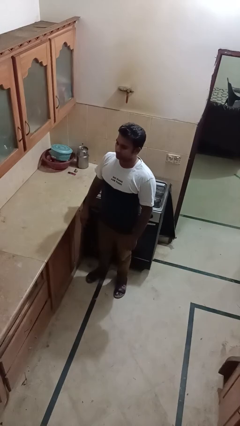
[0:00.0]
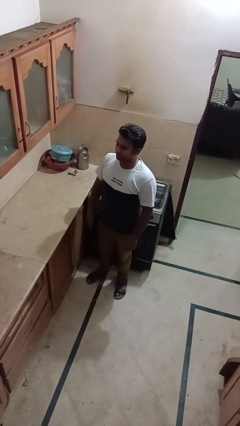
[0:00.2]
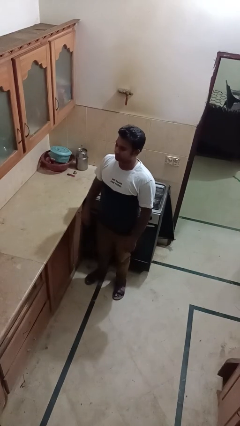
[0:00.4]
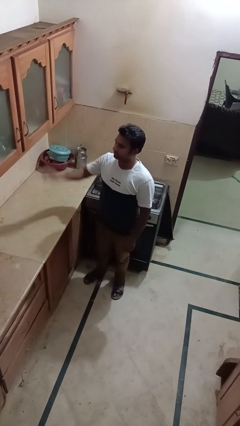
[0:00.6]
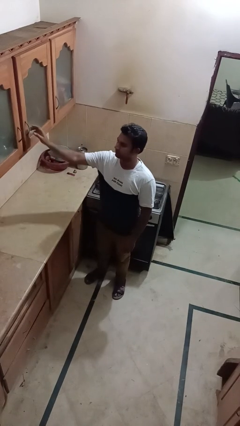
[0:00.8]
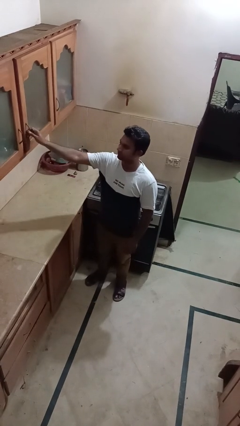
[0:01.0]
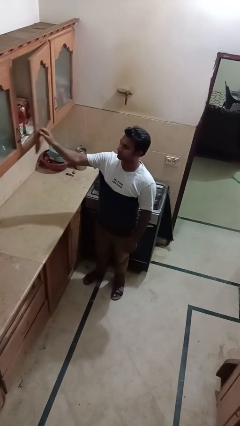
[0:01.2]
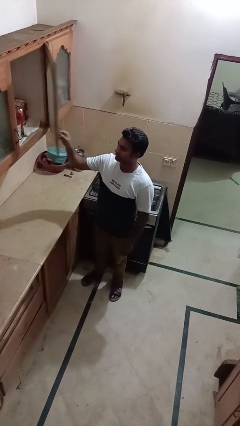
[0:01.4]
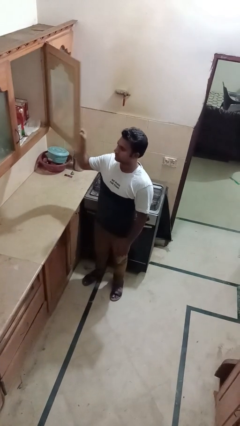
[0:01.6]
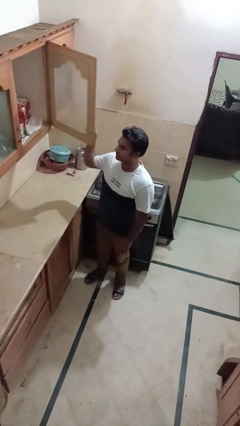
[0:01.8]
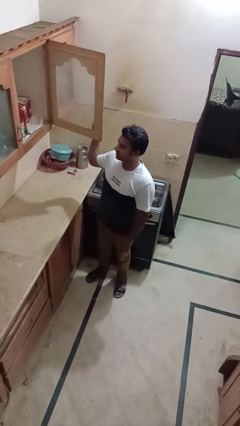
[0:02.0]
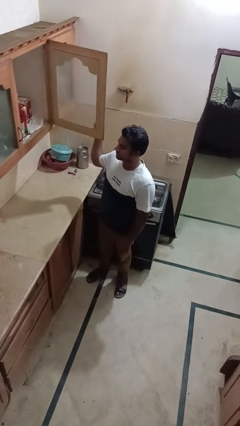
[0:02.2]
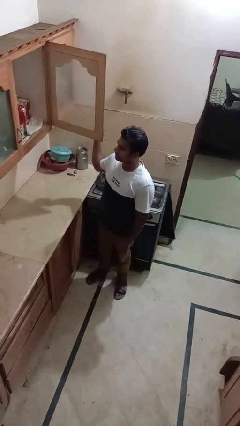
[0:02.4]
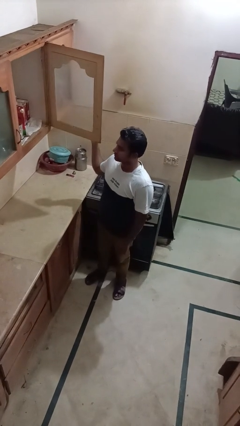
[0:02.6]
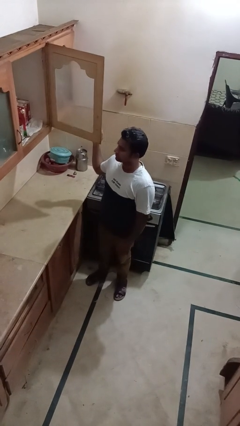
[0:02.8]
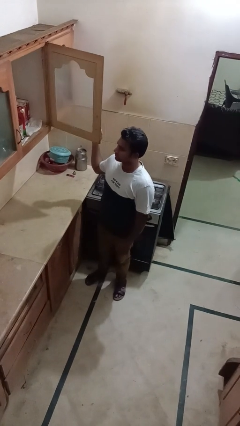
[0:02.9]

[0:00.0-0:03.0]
person opens cabinet

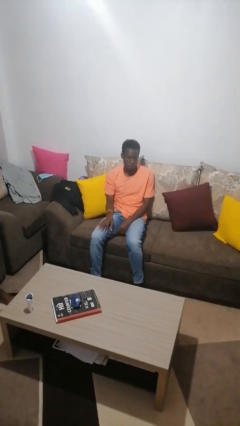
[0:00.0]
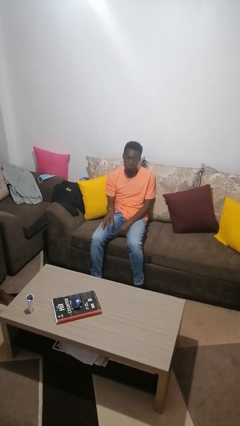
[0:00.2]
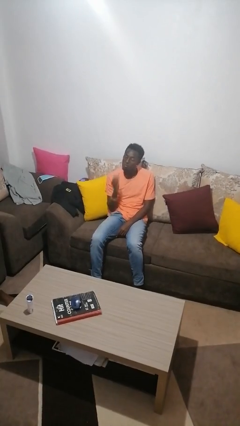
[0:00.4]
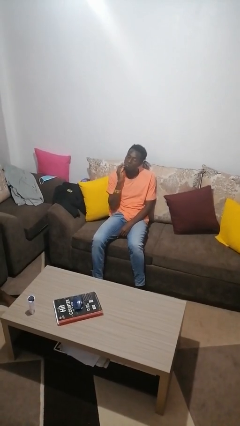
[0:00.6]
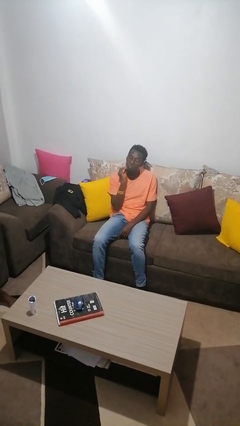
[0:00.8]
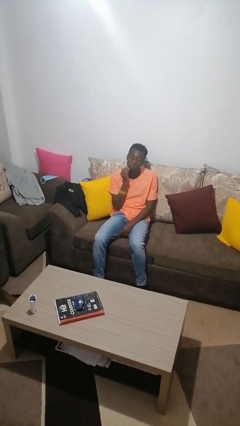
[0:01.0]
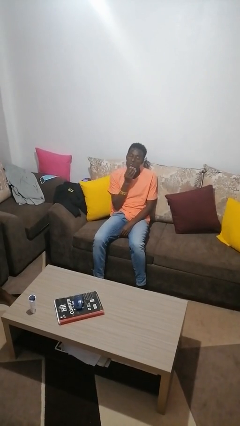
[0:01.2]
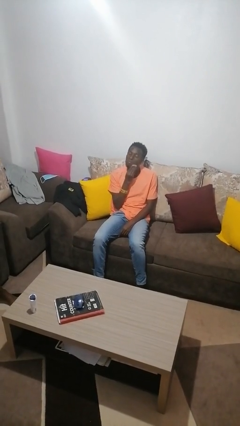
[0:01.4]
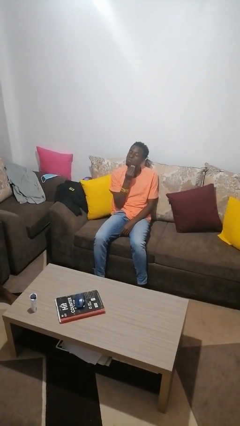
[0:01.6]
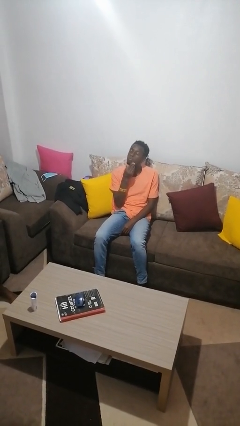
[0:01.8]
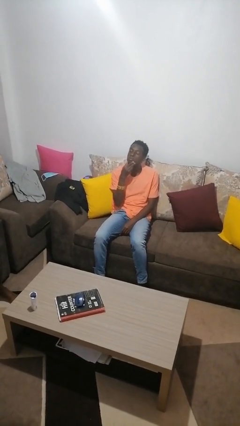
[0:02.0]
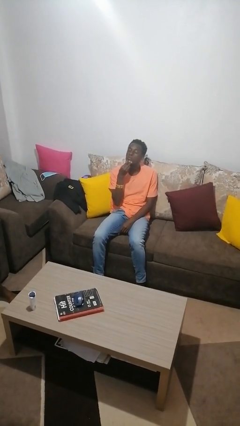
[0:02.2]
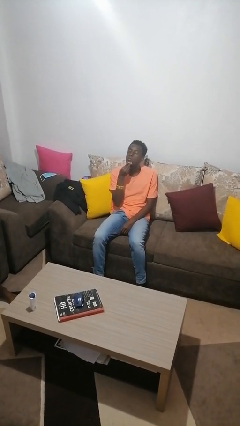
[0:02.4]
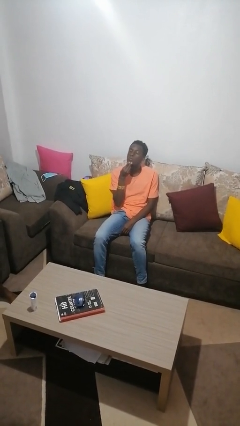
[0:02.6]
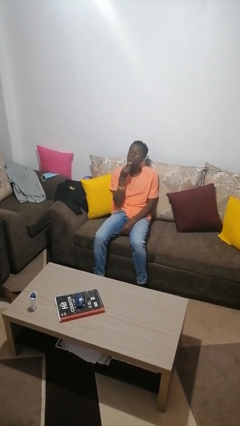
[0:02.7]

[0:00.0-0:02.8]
person strokes chin

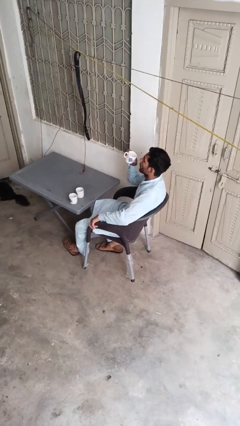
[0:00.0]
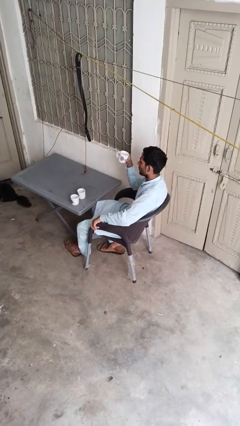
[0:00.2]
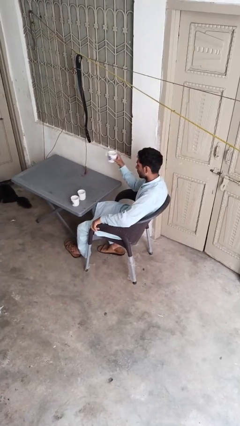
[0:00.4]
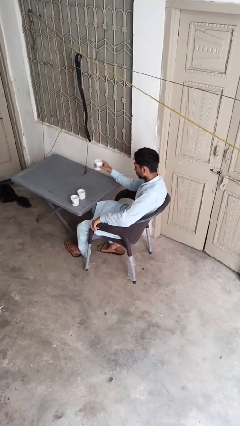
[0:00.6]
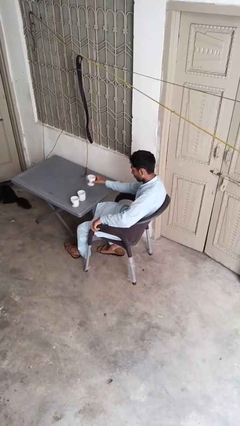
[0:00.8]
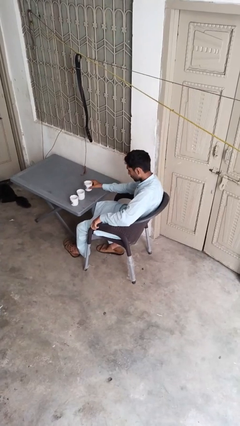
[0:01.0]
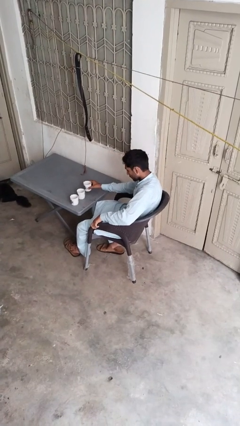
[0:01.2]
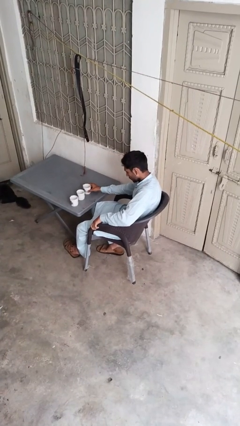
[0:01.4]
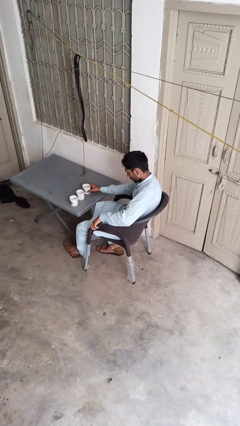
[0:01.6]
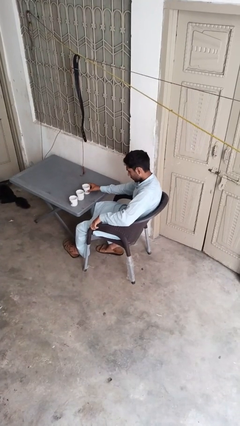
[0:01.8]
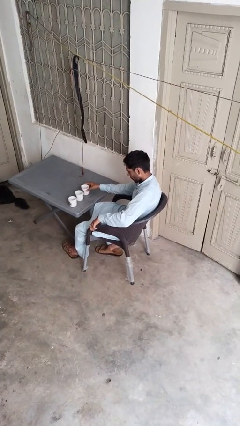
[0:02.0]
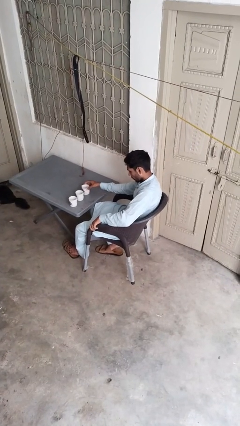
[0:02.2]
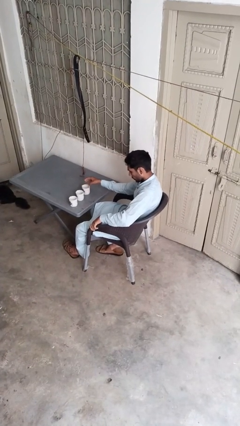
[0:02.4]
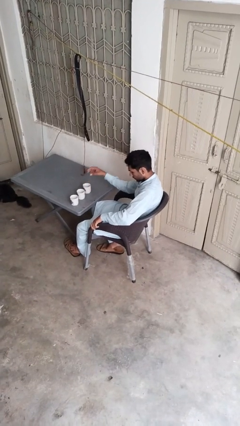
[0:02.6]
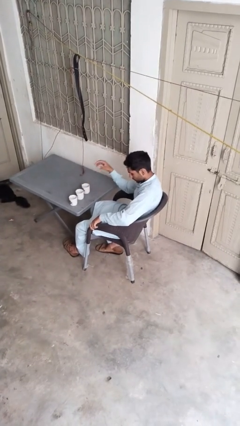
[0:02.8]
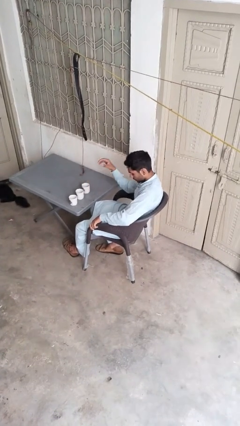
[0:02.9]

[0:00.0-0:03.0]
person puts down object on table

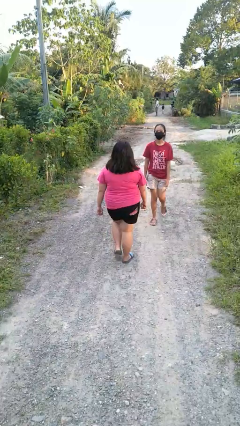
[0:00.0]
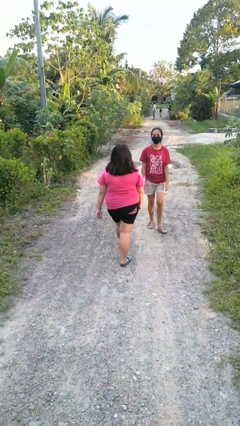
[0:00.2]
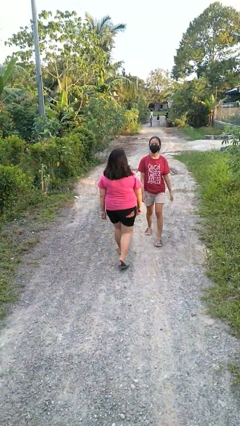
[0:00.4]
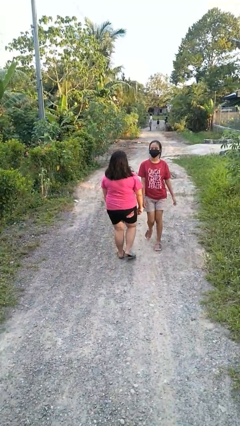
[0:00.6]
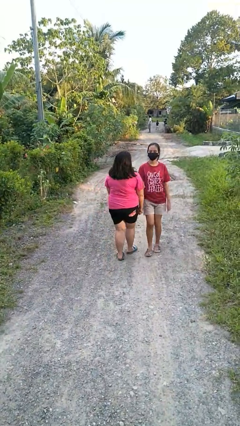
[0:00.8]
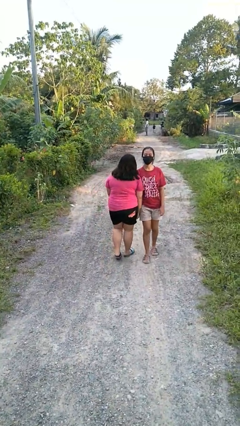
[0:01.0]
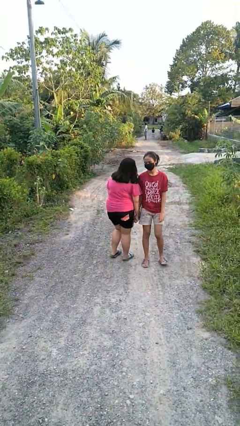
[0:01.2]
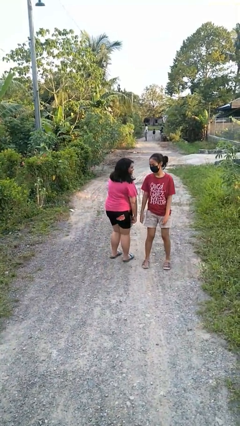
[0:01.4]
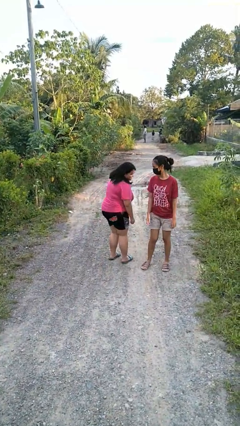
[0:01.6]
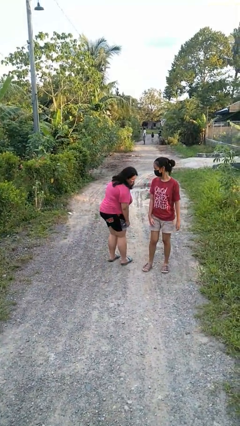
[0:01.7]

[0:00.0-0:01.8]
person bumps into person

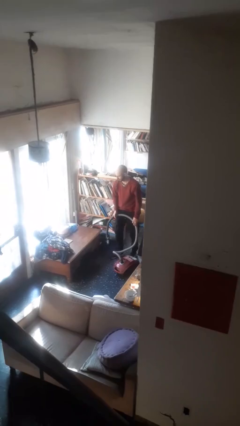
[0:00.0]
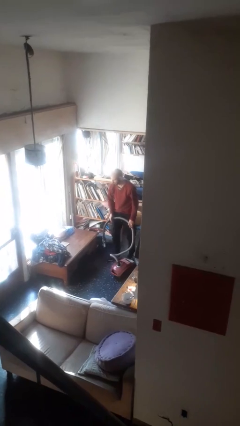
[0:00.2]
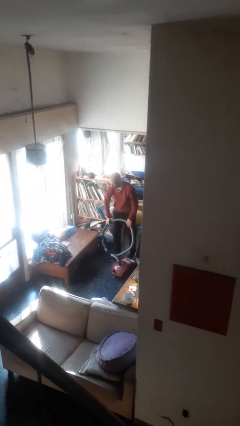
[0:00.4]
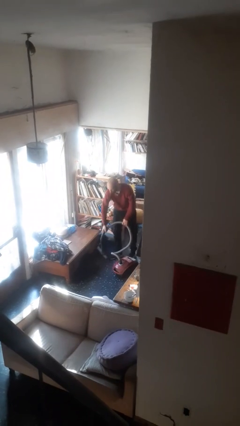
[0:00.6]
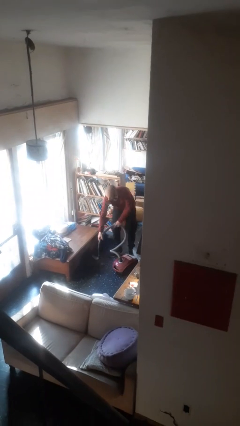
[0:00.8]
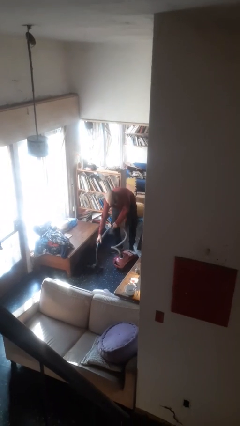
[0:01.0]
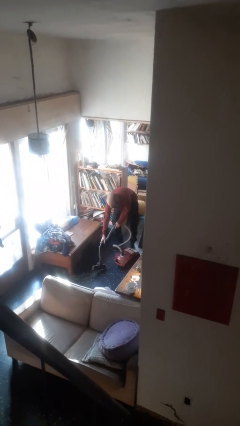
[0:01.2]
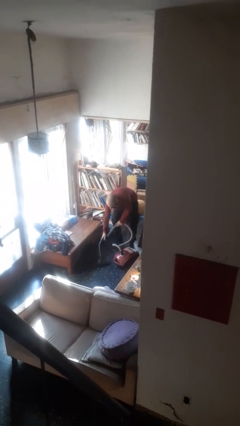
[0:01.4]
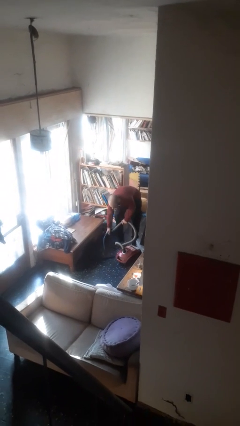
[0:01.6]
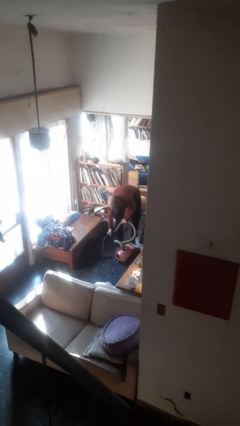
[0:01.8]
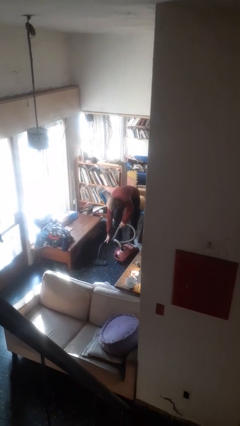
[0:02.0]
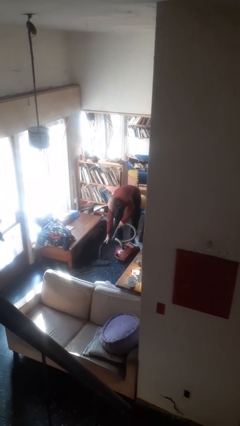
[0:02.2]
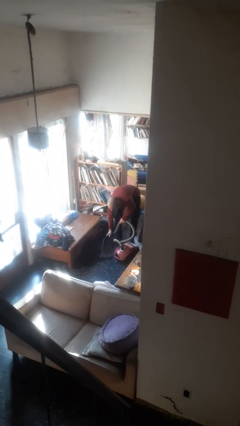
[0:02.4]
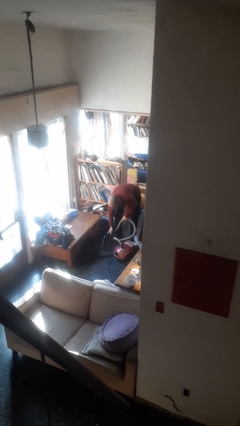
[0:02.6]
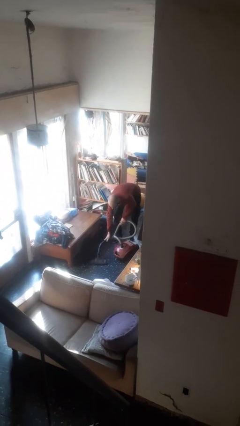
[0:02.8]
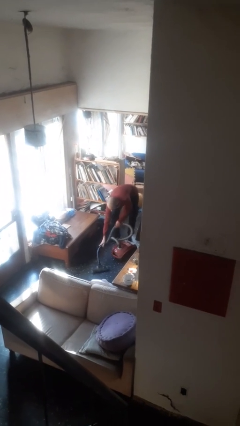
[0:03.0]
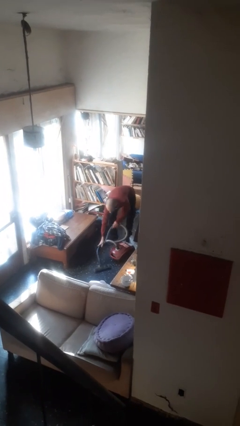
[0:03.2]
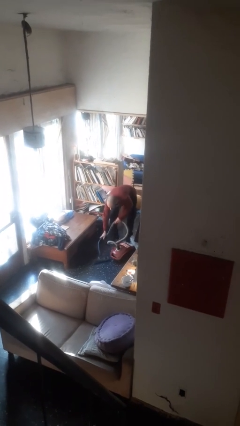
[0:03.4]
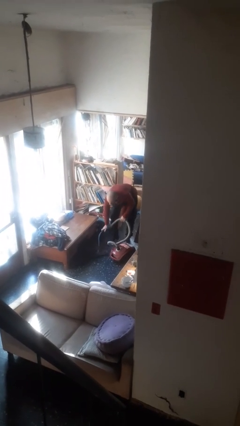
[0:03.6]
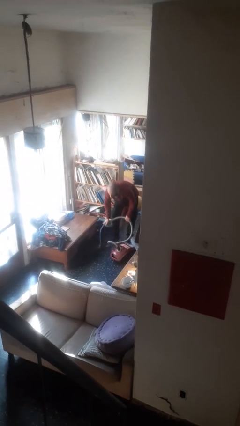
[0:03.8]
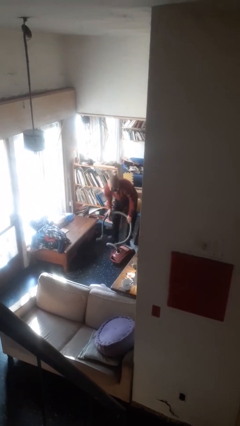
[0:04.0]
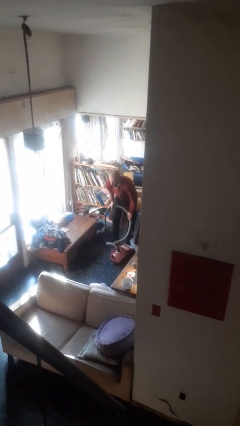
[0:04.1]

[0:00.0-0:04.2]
person vacuums carpet

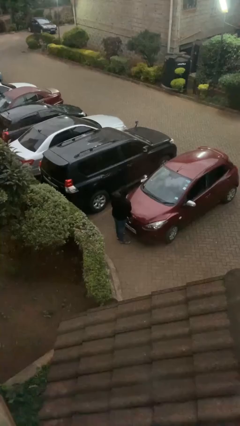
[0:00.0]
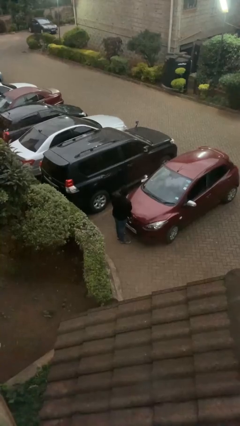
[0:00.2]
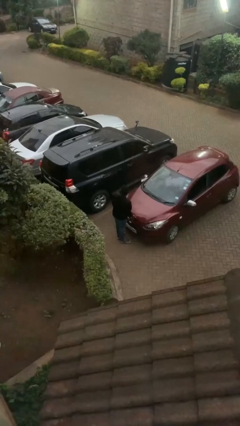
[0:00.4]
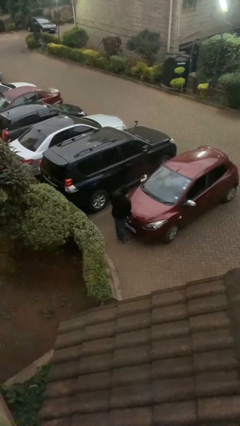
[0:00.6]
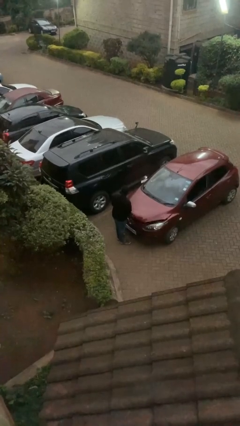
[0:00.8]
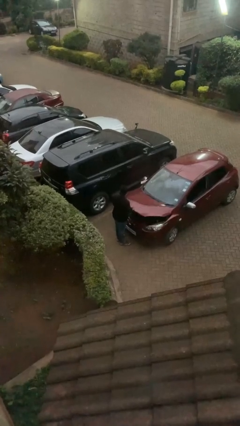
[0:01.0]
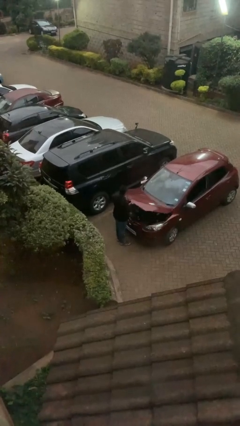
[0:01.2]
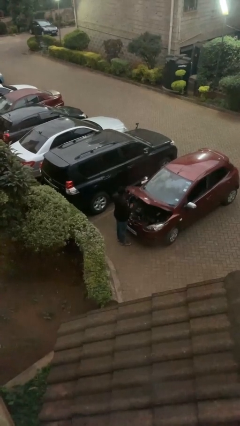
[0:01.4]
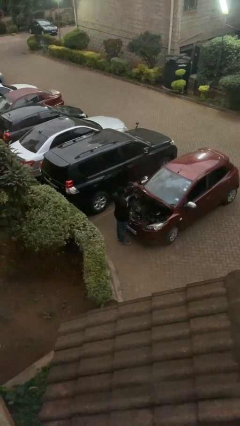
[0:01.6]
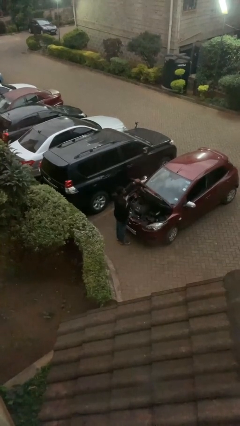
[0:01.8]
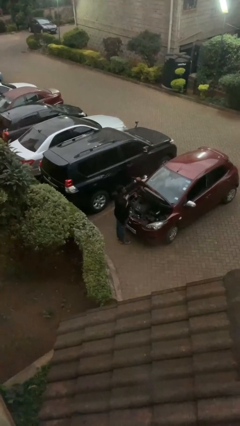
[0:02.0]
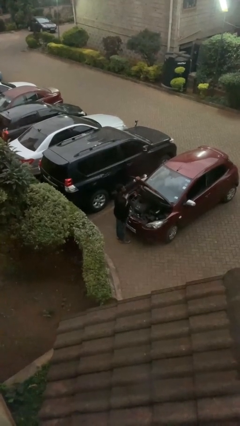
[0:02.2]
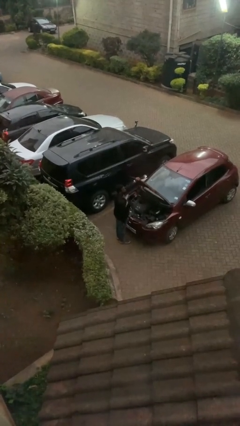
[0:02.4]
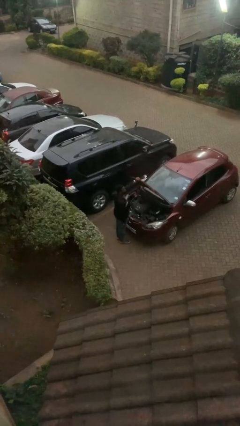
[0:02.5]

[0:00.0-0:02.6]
person opens car hood

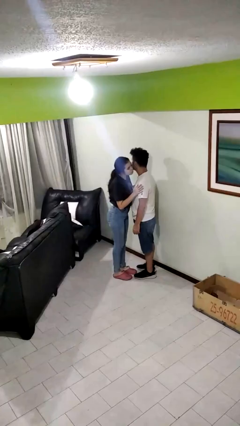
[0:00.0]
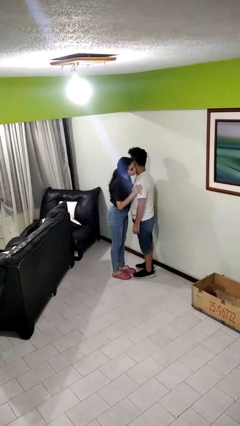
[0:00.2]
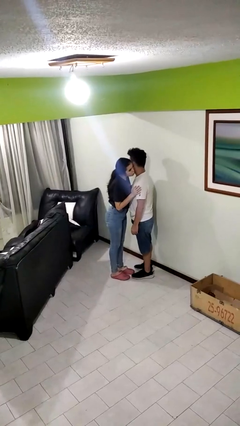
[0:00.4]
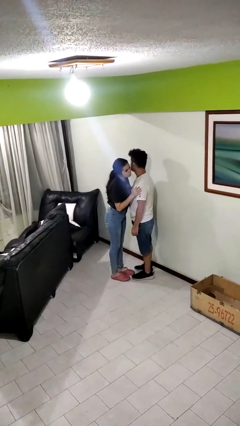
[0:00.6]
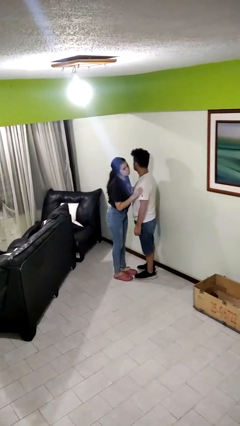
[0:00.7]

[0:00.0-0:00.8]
person kisses cheek of person
